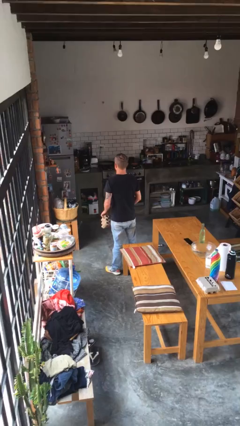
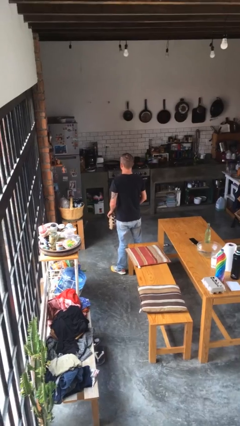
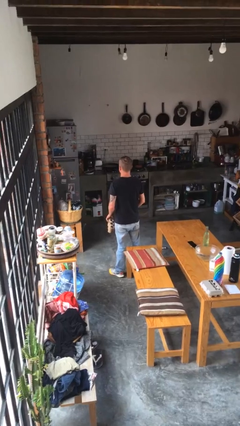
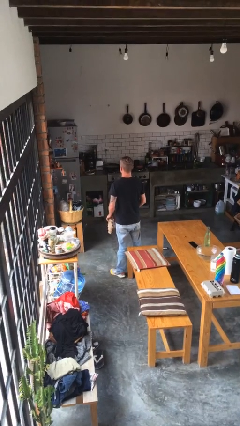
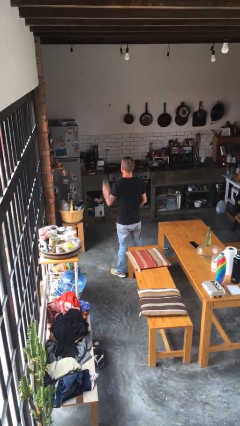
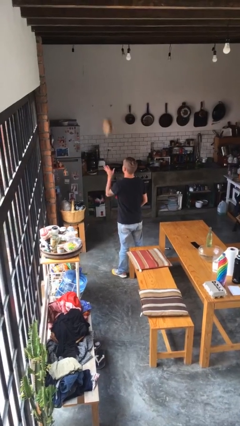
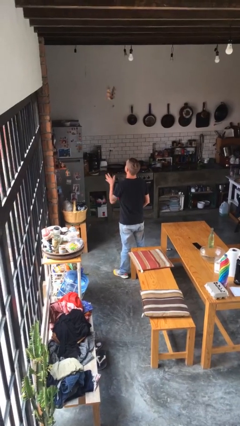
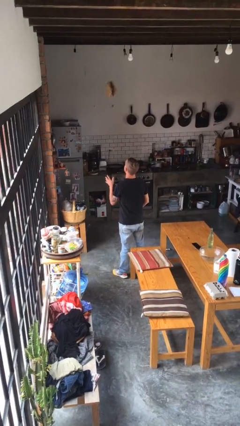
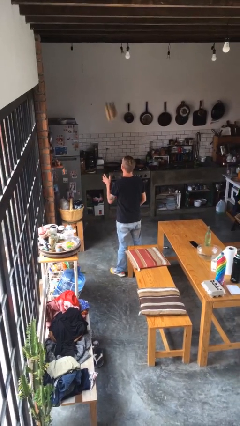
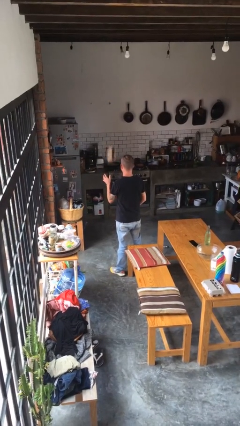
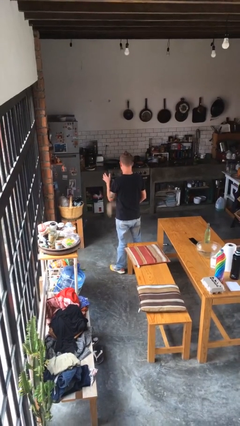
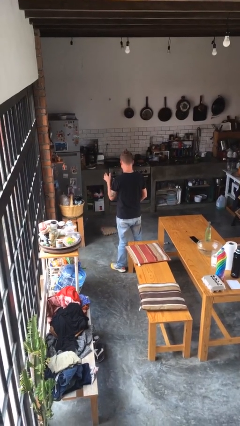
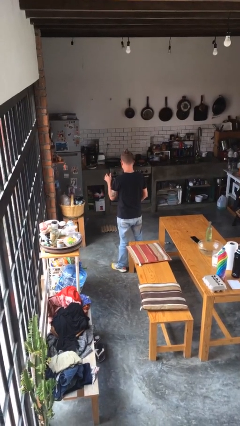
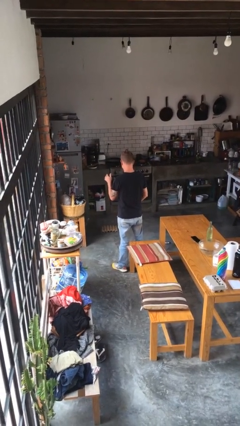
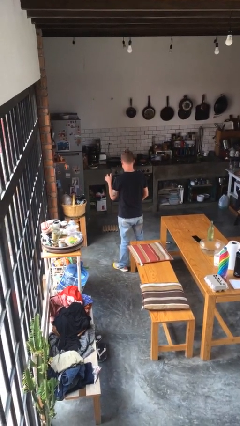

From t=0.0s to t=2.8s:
person throws object into air

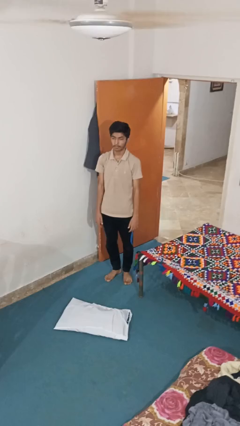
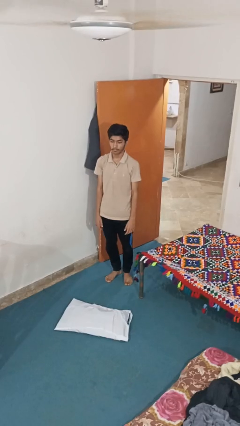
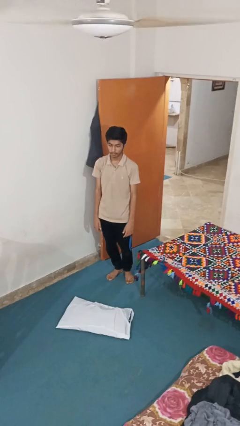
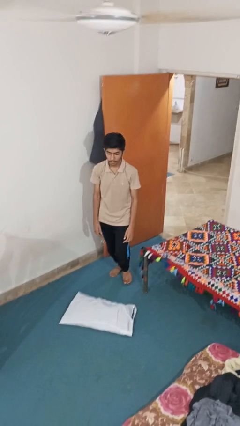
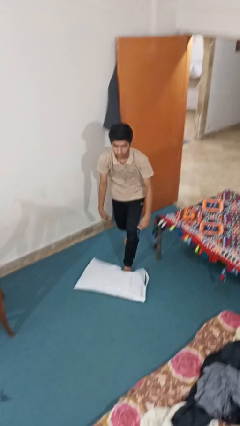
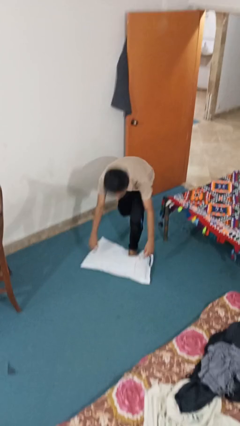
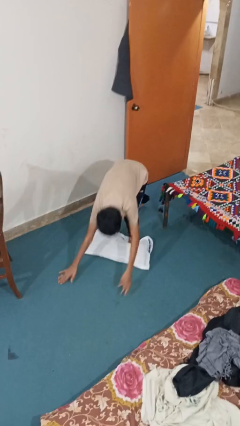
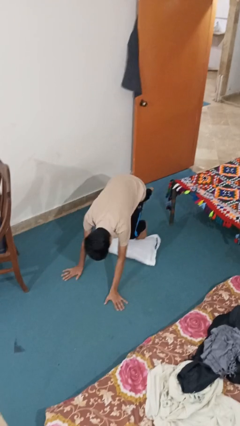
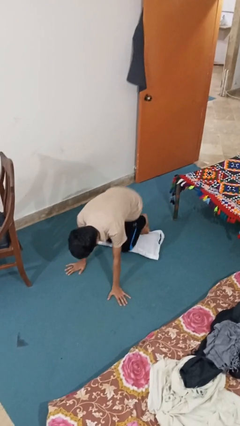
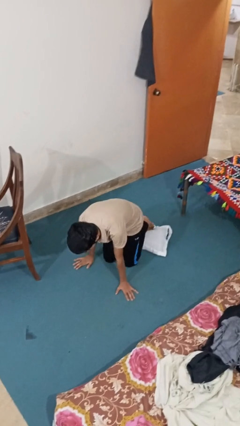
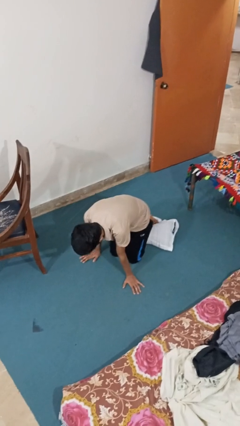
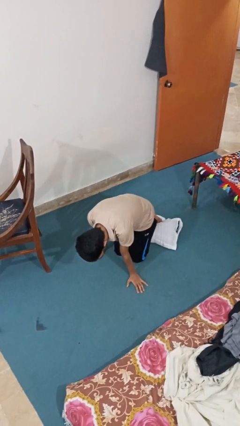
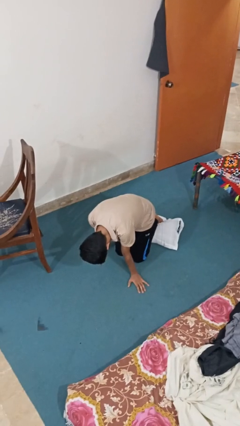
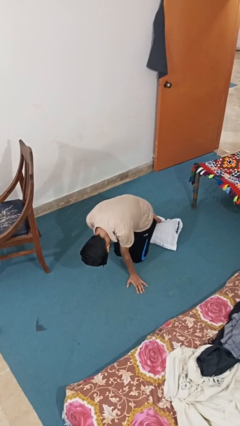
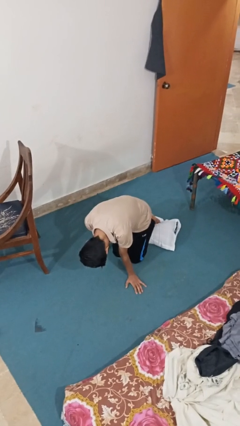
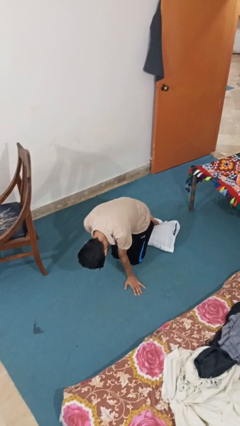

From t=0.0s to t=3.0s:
person trips on object on floor

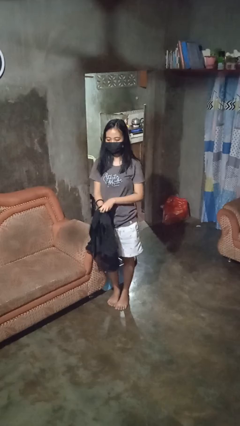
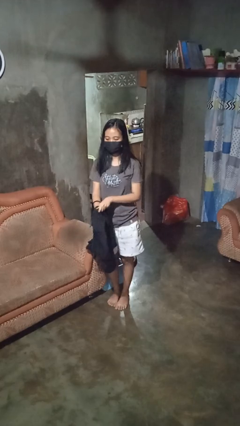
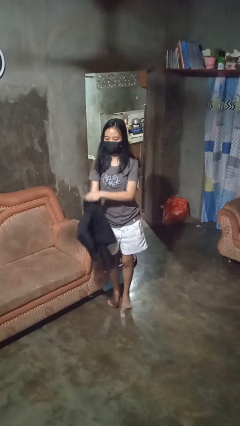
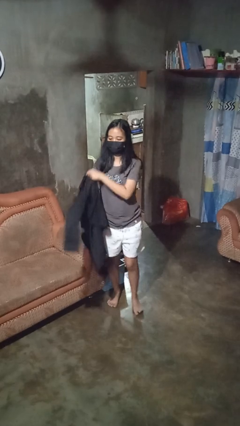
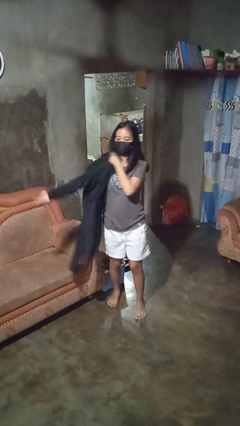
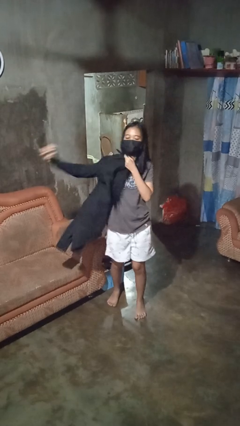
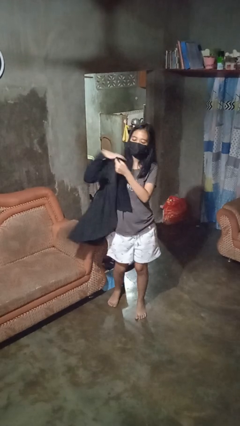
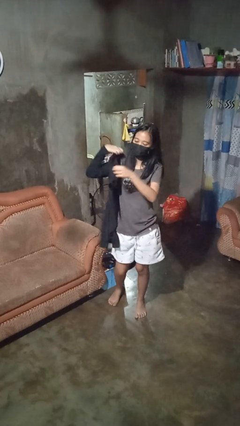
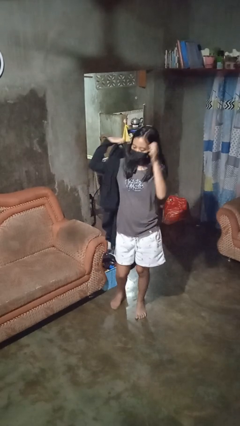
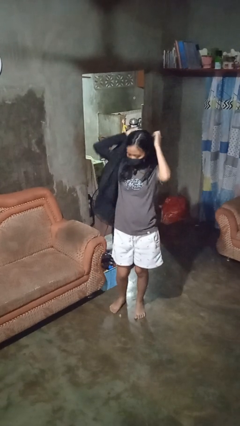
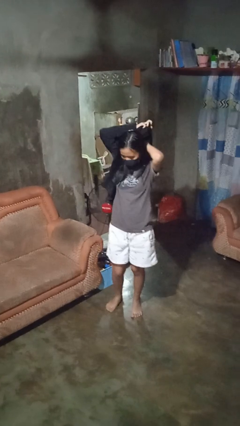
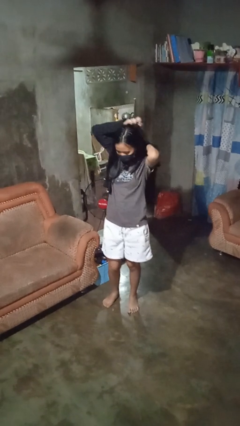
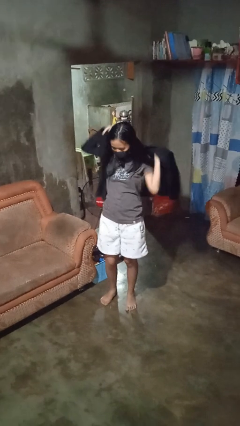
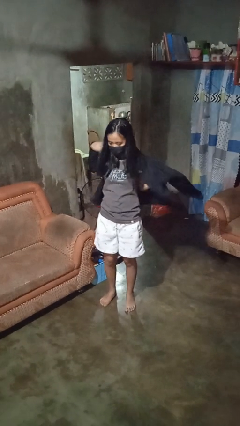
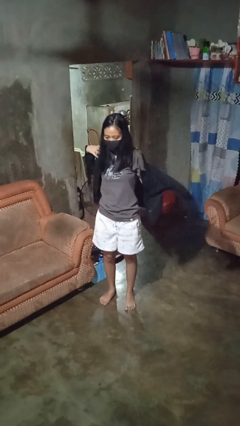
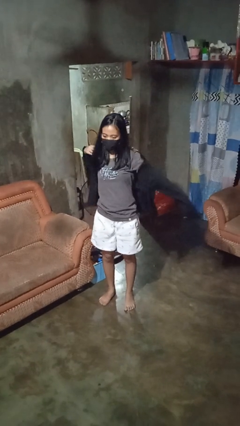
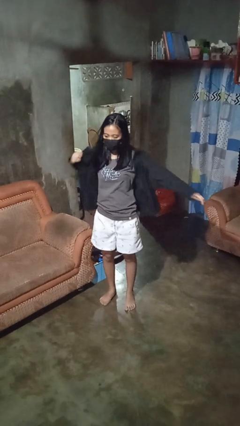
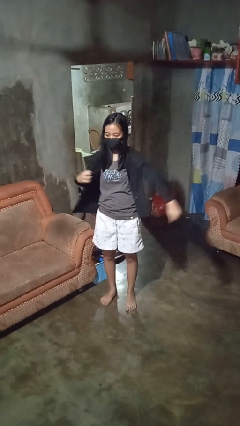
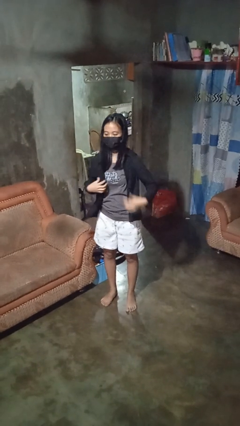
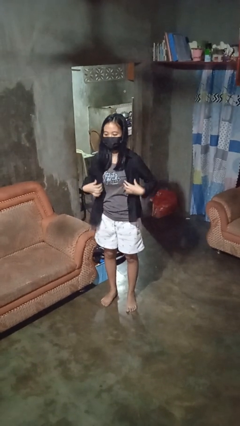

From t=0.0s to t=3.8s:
person puts on shirt

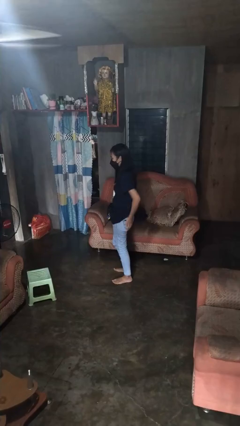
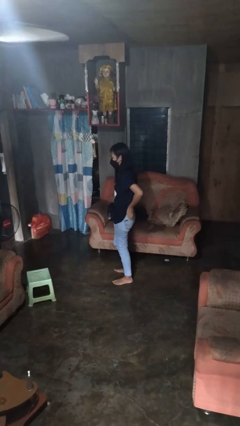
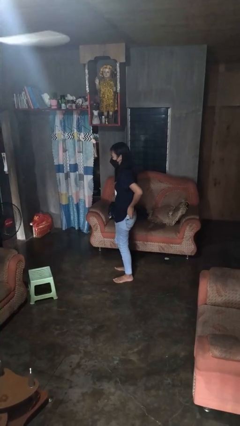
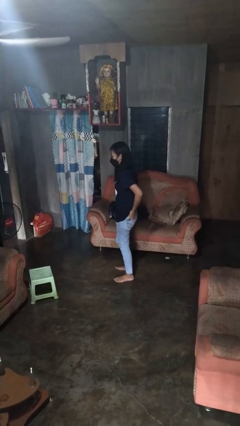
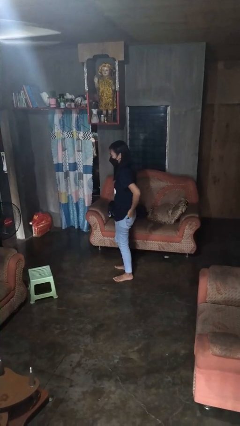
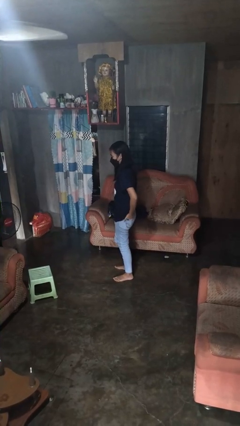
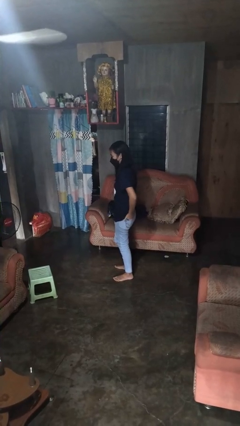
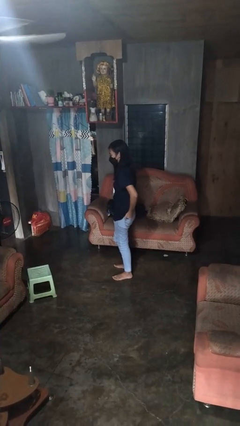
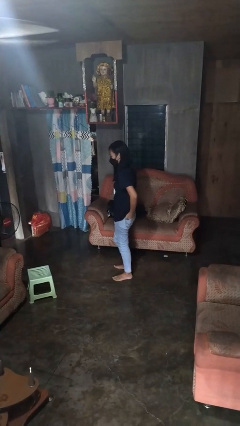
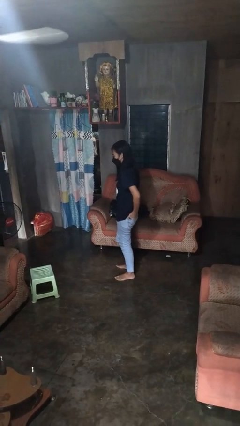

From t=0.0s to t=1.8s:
person puts hands in back pockets

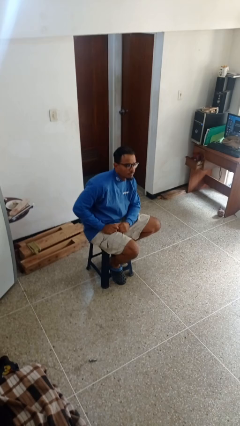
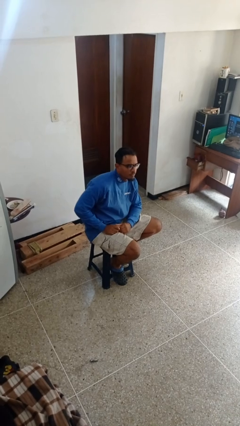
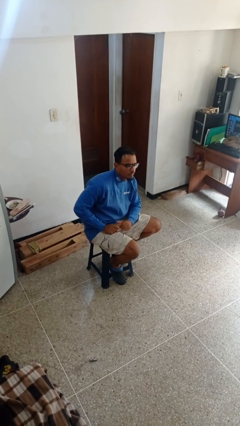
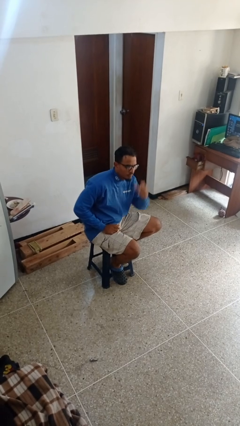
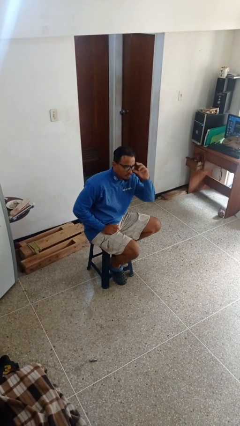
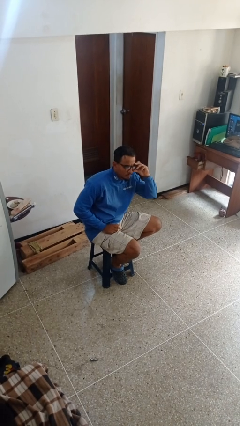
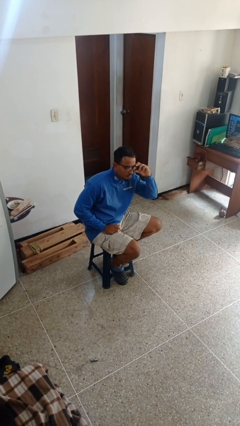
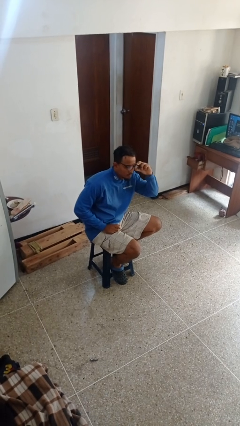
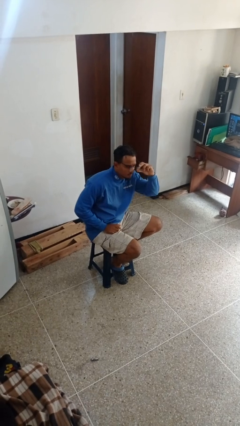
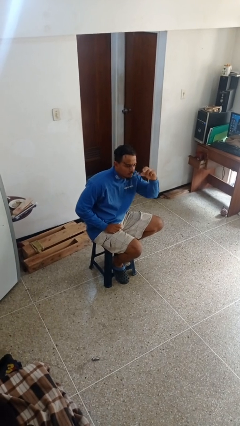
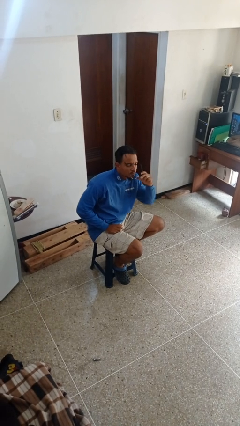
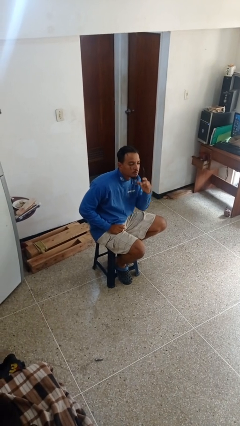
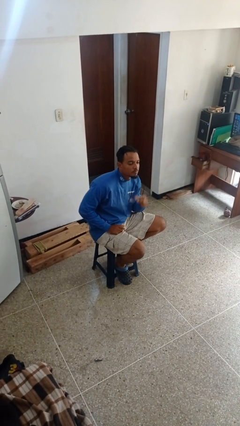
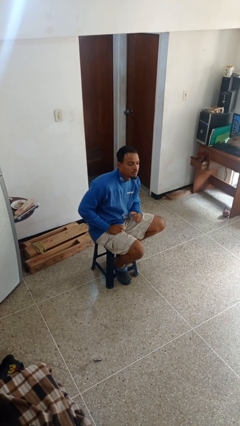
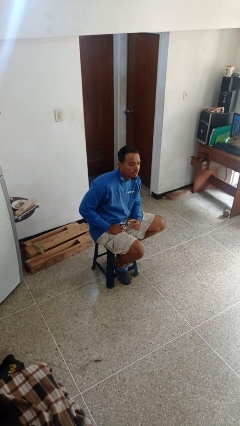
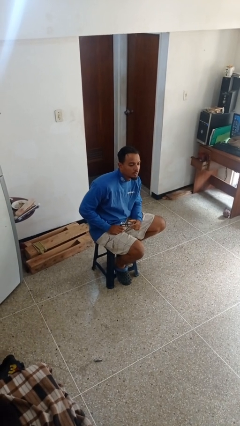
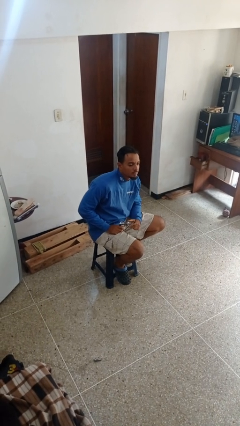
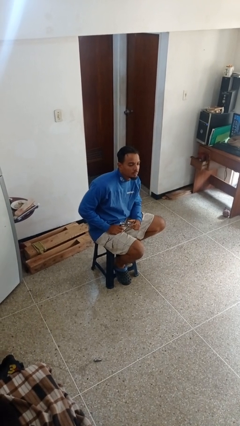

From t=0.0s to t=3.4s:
person takes off glasses

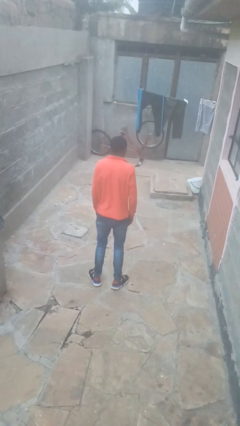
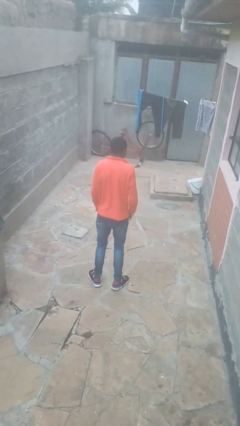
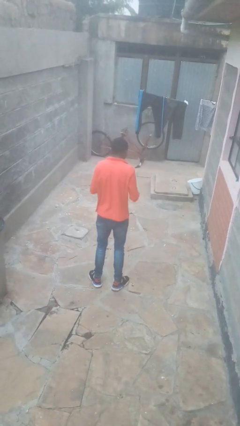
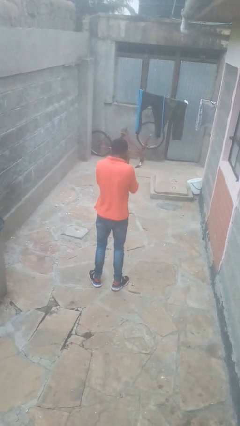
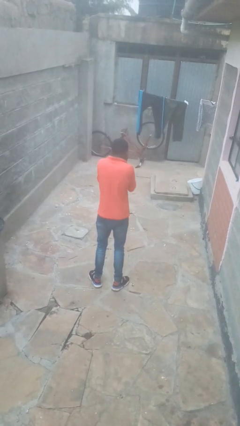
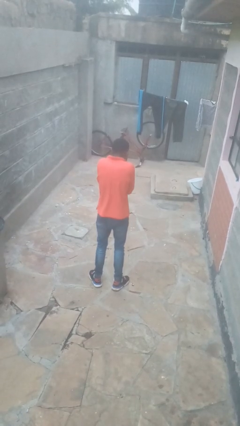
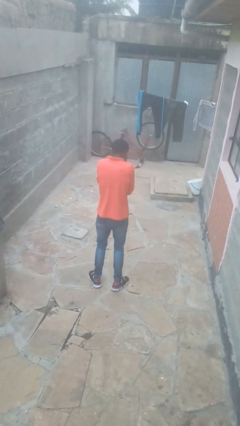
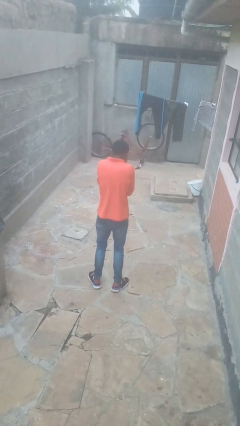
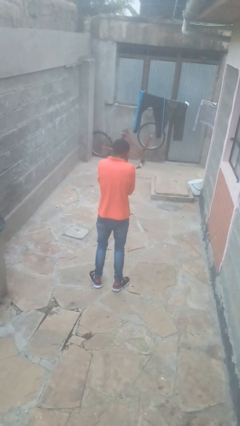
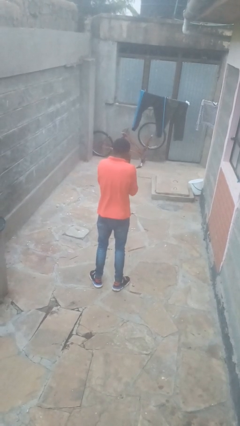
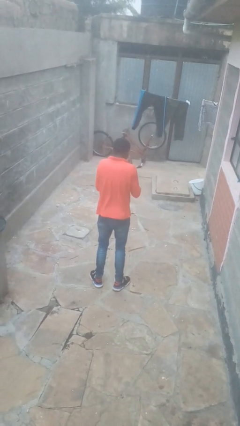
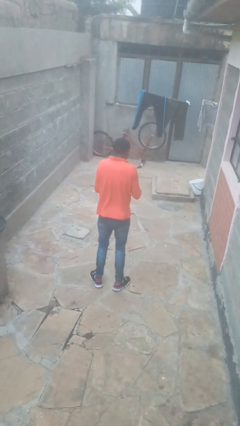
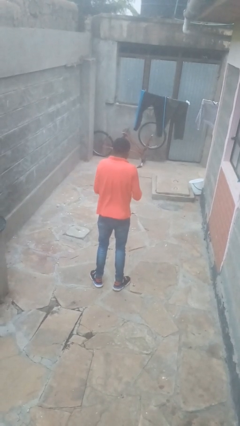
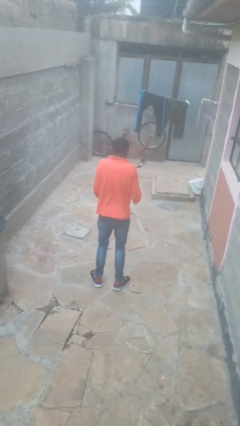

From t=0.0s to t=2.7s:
person covers face with hands
